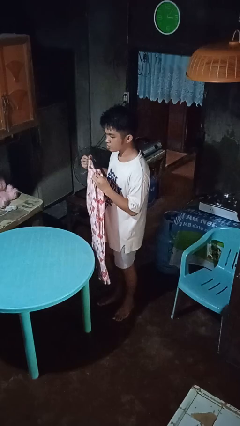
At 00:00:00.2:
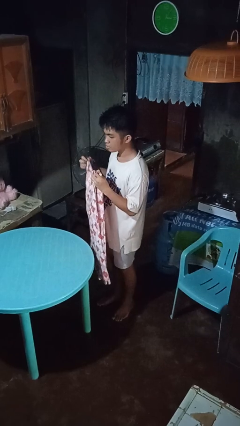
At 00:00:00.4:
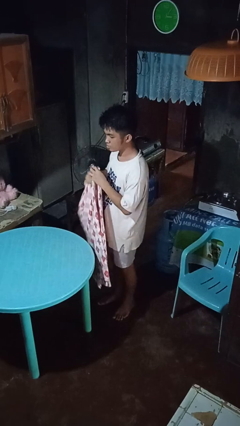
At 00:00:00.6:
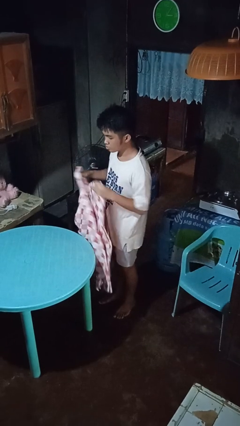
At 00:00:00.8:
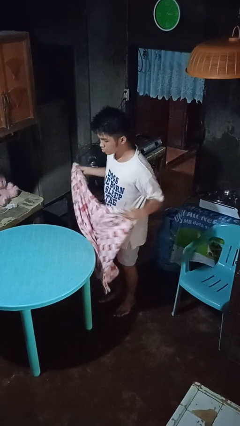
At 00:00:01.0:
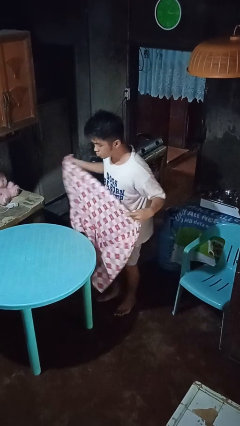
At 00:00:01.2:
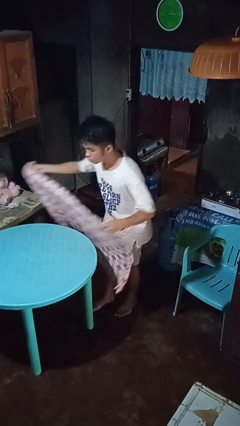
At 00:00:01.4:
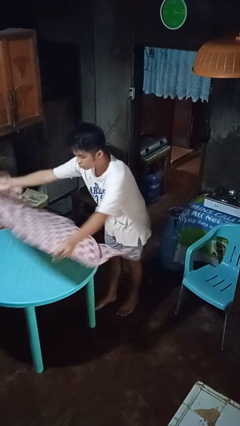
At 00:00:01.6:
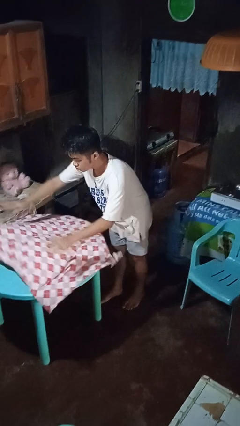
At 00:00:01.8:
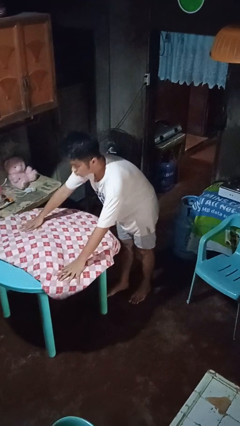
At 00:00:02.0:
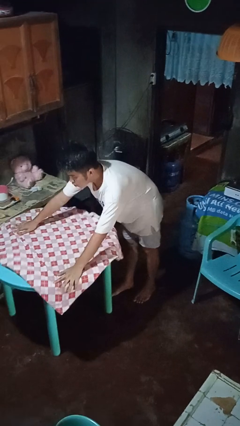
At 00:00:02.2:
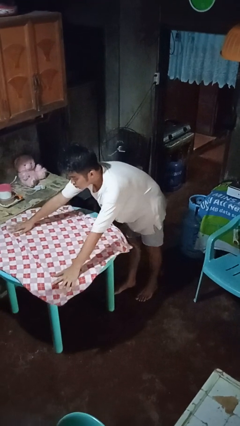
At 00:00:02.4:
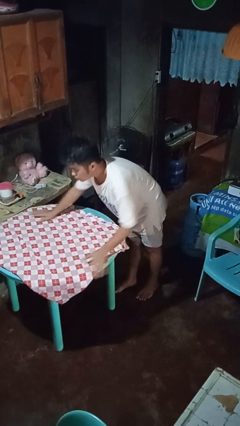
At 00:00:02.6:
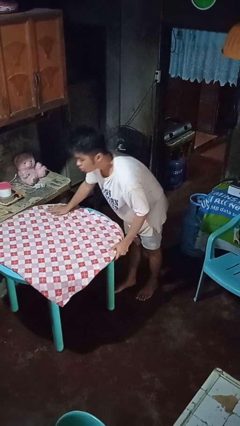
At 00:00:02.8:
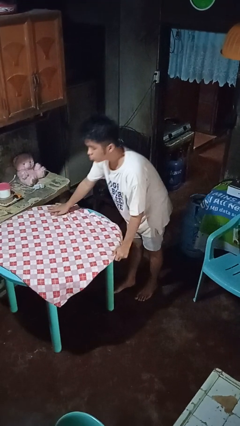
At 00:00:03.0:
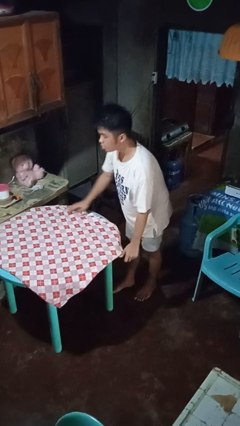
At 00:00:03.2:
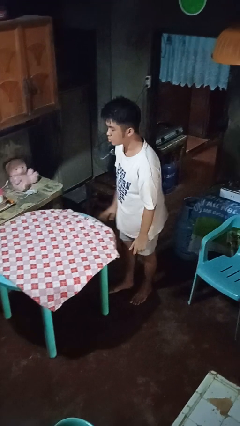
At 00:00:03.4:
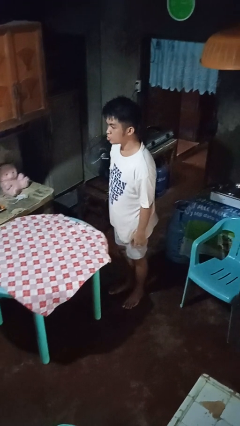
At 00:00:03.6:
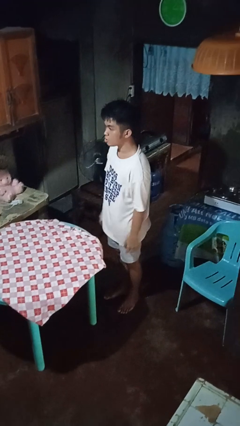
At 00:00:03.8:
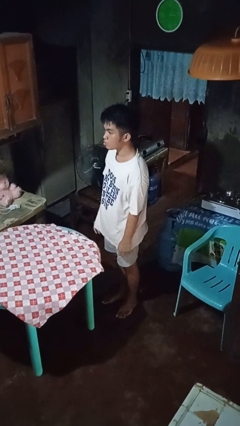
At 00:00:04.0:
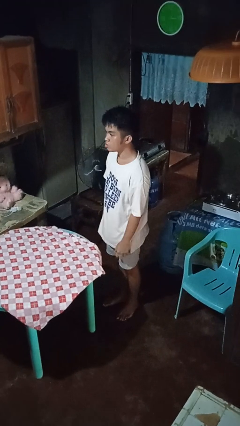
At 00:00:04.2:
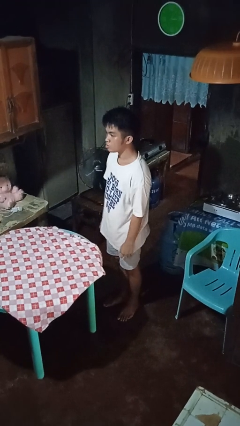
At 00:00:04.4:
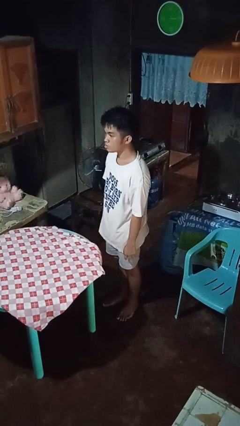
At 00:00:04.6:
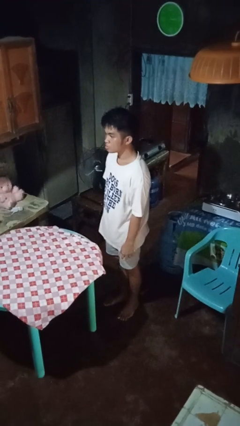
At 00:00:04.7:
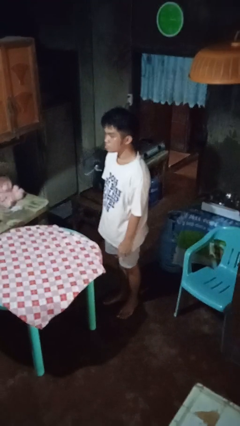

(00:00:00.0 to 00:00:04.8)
person spreads tablecloth

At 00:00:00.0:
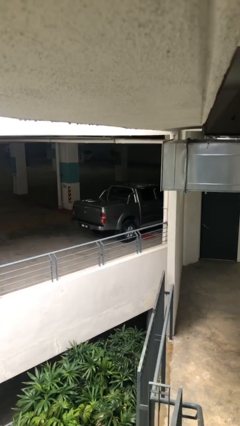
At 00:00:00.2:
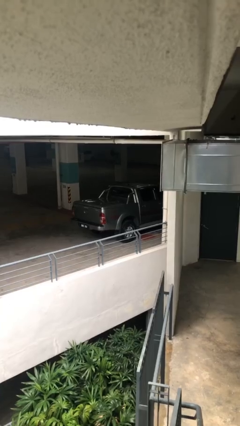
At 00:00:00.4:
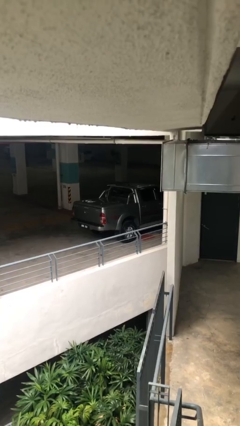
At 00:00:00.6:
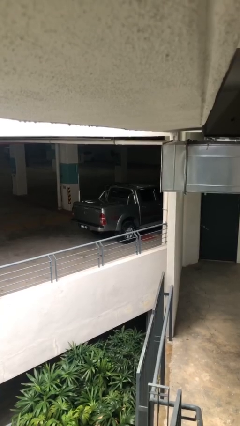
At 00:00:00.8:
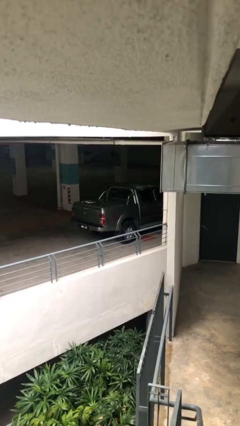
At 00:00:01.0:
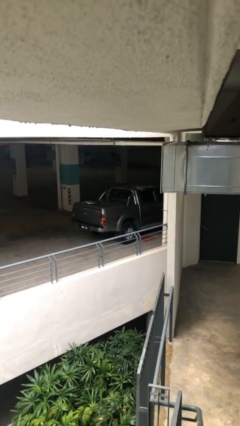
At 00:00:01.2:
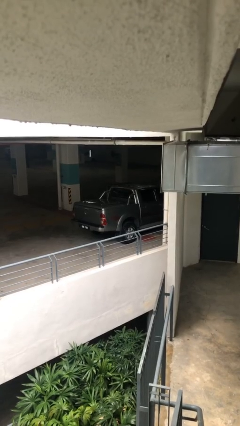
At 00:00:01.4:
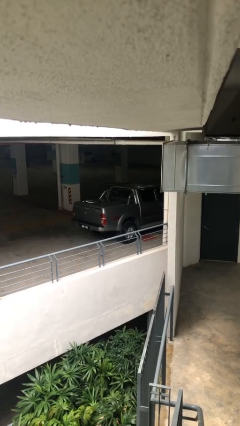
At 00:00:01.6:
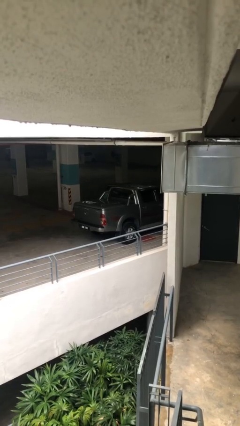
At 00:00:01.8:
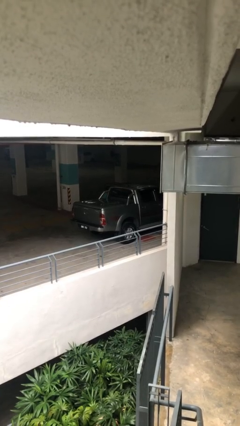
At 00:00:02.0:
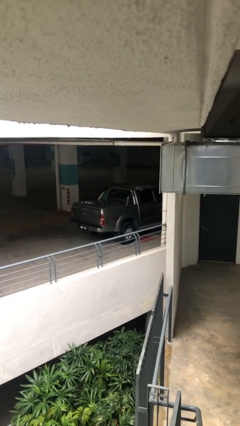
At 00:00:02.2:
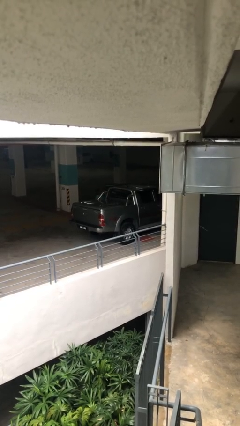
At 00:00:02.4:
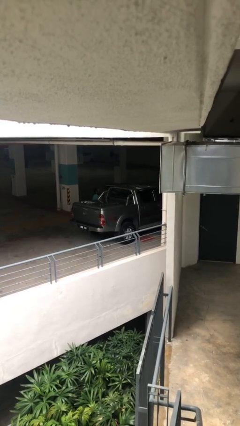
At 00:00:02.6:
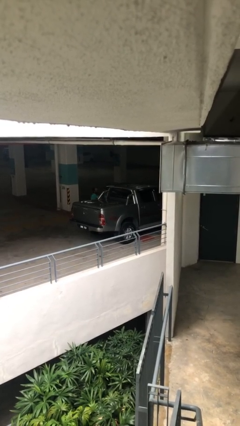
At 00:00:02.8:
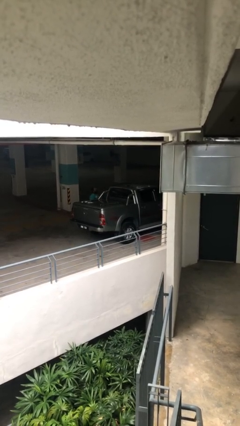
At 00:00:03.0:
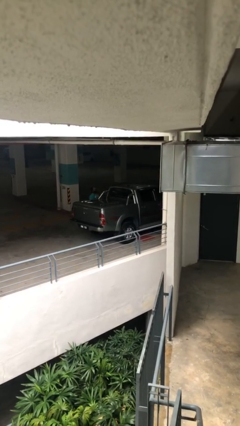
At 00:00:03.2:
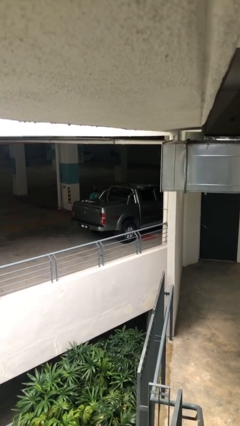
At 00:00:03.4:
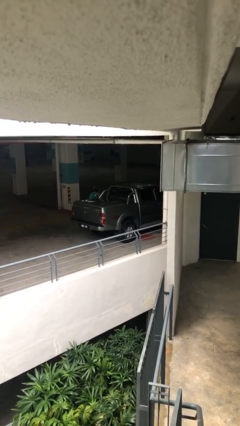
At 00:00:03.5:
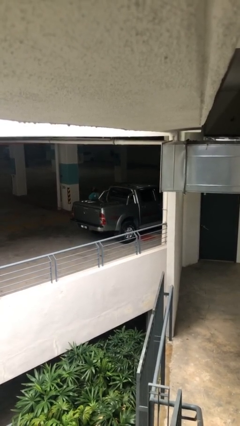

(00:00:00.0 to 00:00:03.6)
car drops off person

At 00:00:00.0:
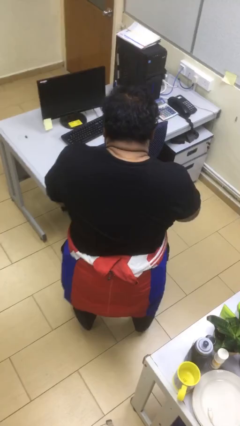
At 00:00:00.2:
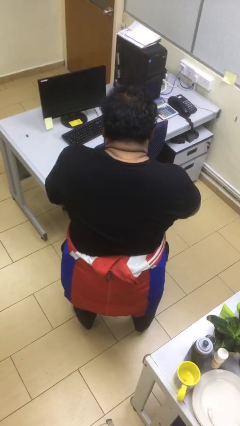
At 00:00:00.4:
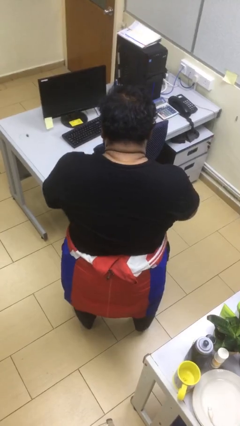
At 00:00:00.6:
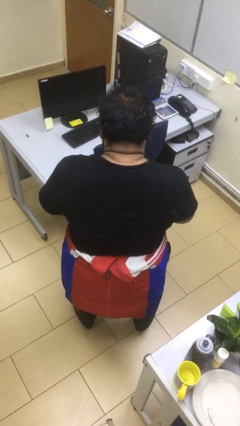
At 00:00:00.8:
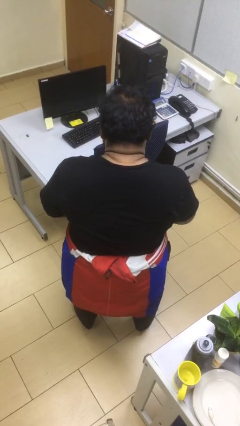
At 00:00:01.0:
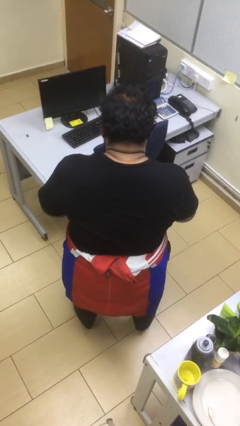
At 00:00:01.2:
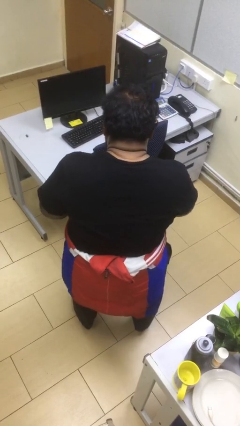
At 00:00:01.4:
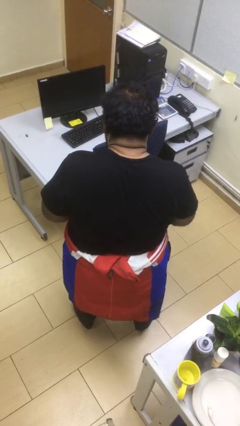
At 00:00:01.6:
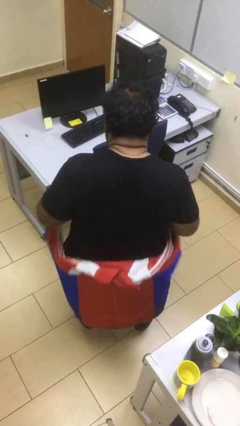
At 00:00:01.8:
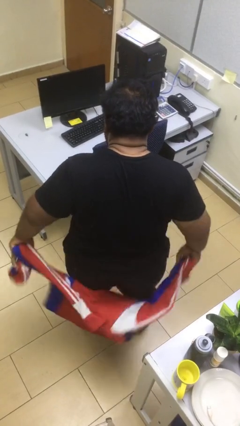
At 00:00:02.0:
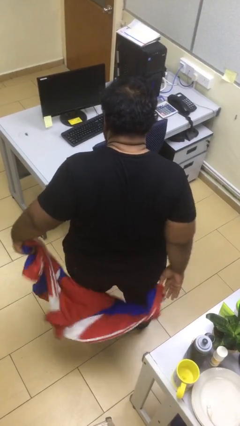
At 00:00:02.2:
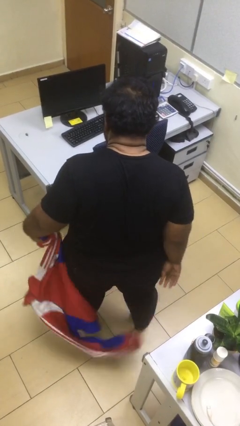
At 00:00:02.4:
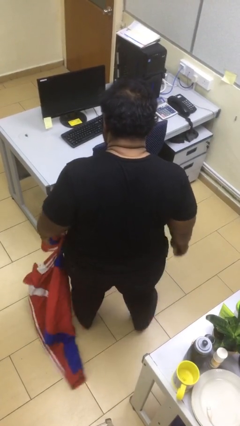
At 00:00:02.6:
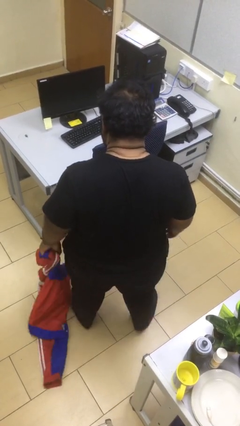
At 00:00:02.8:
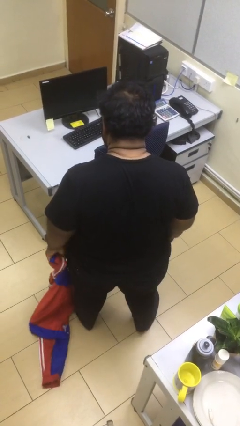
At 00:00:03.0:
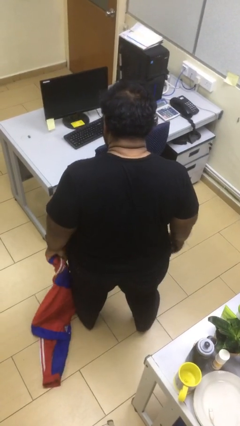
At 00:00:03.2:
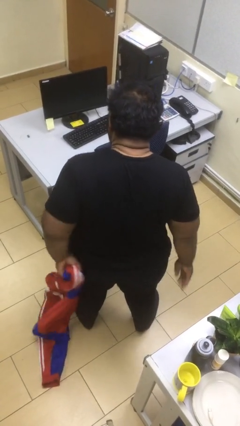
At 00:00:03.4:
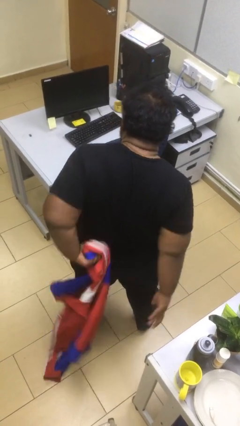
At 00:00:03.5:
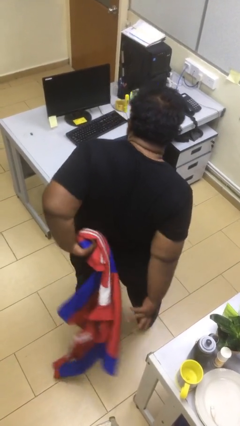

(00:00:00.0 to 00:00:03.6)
person unties jacket around waist

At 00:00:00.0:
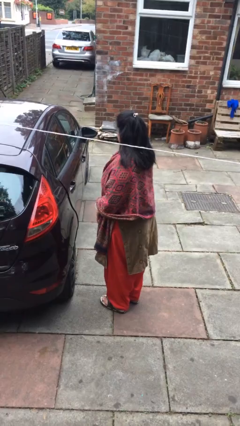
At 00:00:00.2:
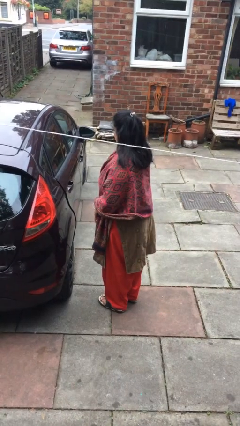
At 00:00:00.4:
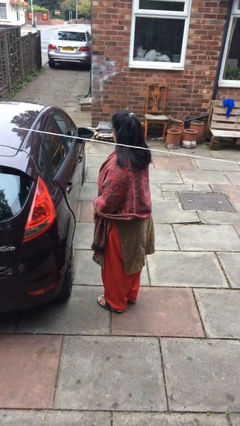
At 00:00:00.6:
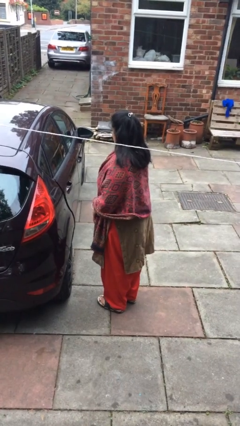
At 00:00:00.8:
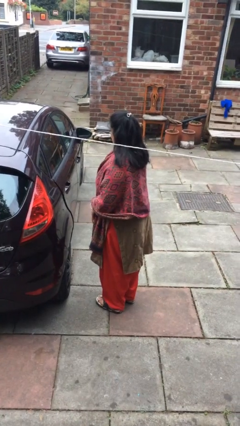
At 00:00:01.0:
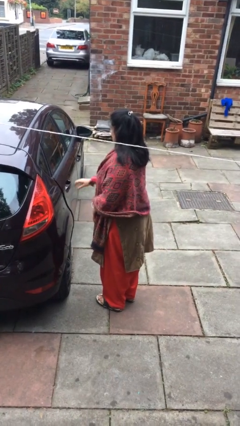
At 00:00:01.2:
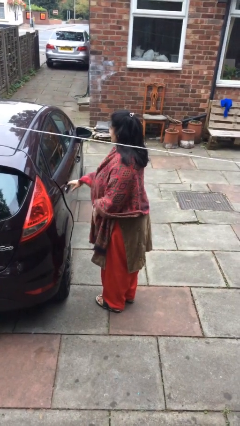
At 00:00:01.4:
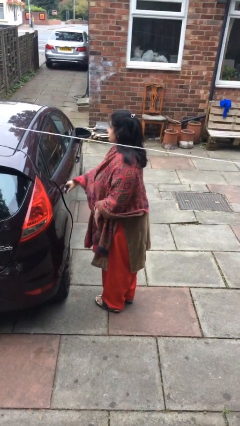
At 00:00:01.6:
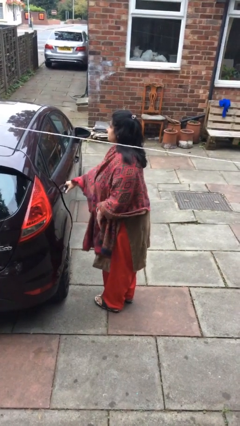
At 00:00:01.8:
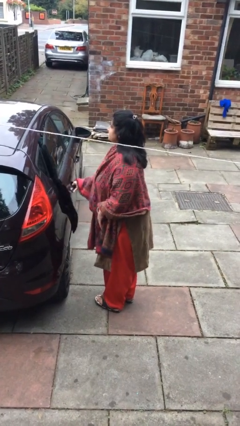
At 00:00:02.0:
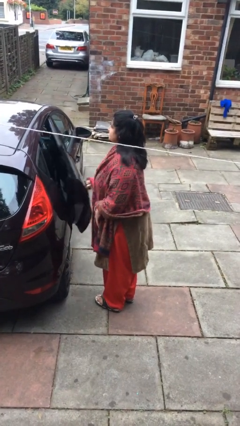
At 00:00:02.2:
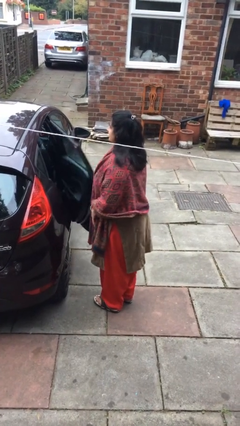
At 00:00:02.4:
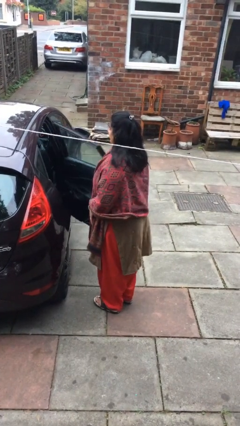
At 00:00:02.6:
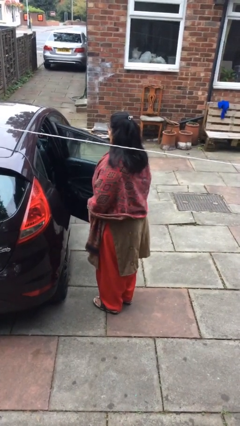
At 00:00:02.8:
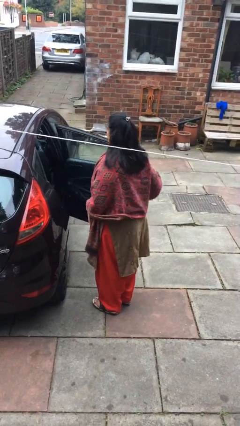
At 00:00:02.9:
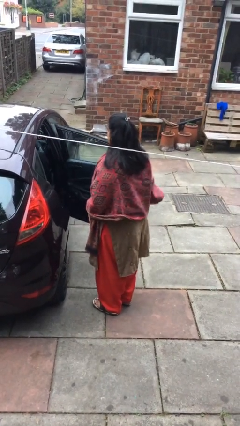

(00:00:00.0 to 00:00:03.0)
person opens car door

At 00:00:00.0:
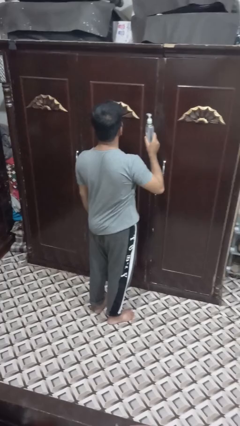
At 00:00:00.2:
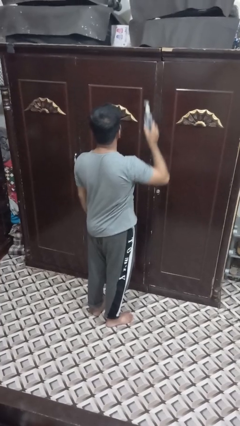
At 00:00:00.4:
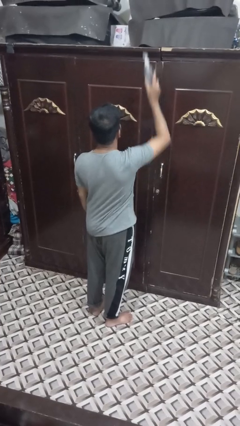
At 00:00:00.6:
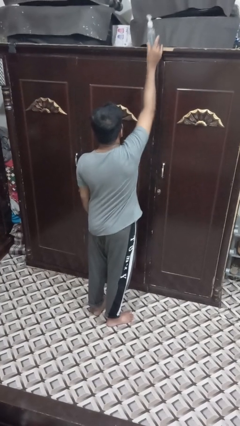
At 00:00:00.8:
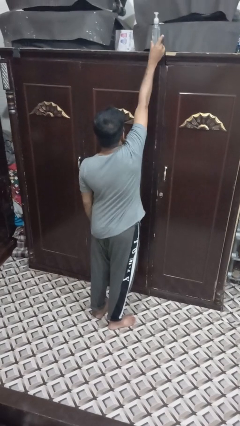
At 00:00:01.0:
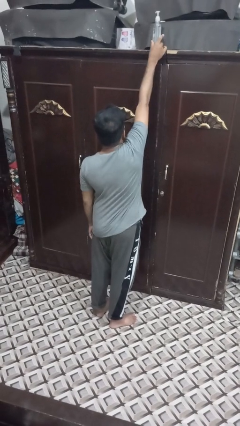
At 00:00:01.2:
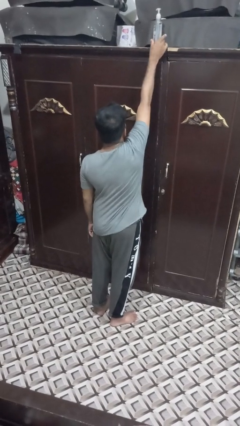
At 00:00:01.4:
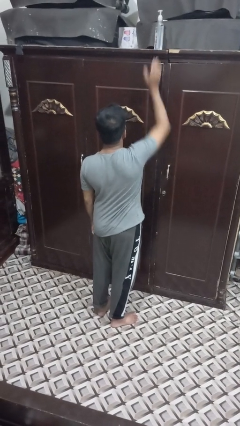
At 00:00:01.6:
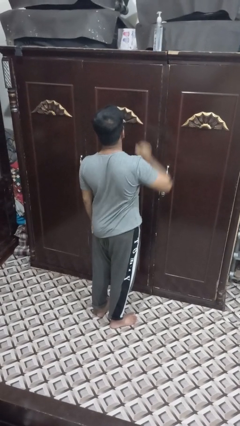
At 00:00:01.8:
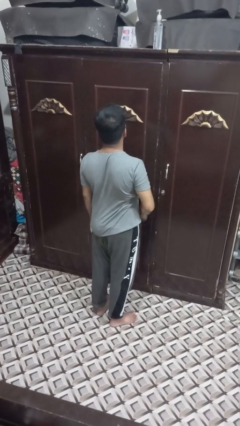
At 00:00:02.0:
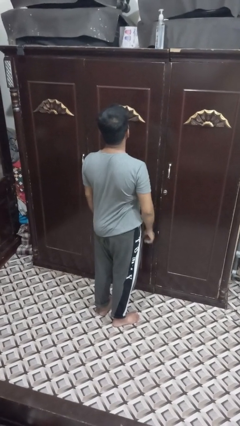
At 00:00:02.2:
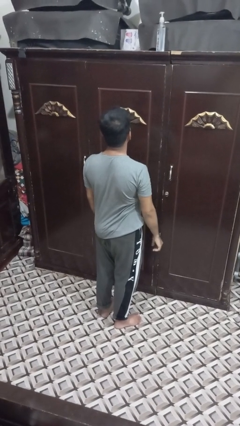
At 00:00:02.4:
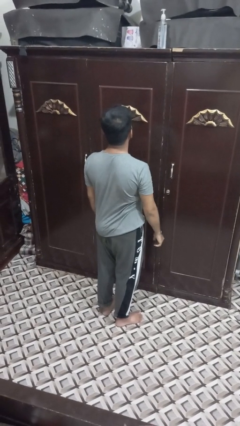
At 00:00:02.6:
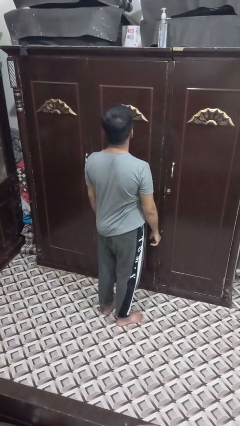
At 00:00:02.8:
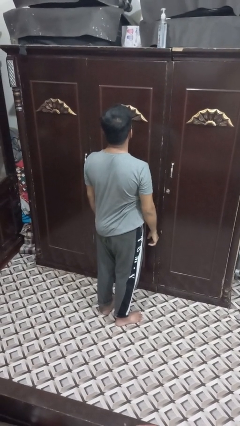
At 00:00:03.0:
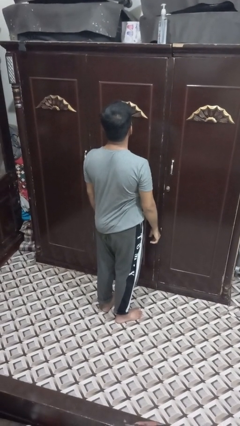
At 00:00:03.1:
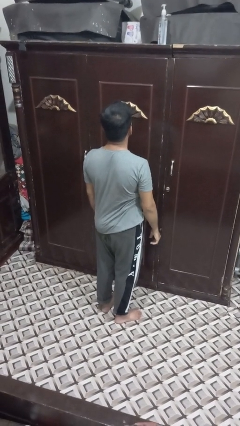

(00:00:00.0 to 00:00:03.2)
person puts down object on shelf
